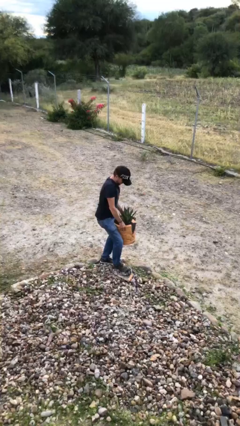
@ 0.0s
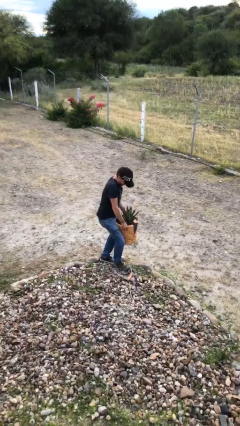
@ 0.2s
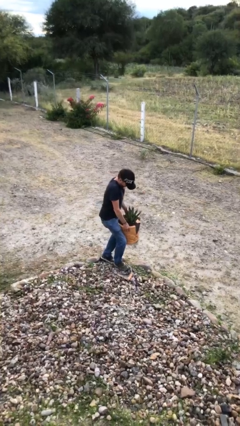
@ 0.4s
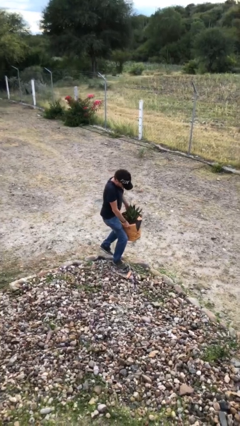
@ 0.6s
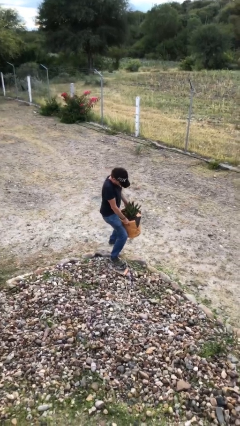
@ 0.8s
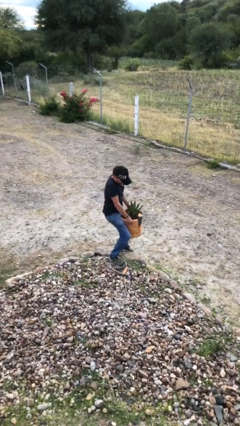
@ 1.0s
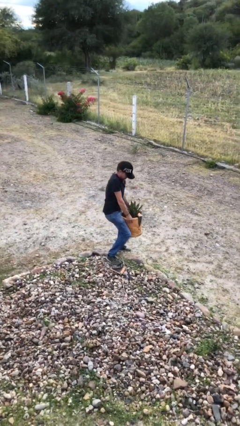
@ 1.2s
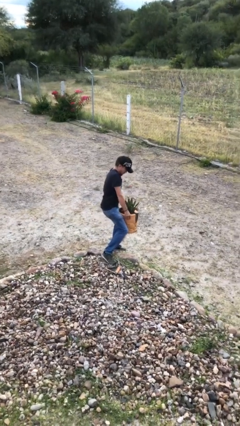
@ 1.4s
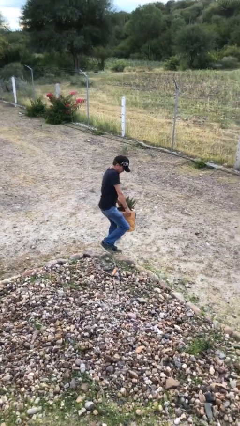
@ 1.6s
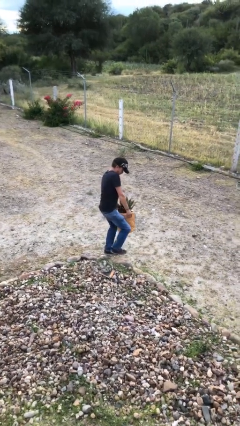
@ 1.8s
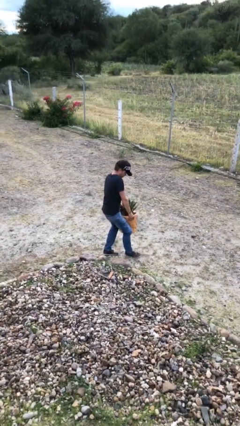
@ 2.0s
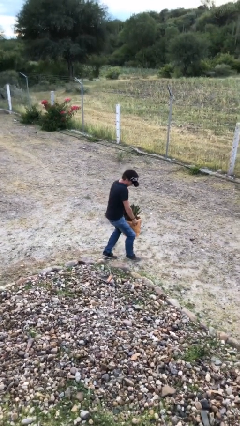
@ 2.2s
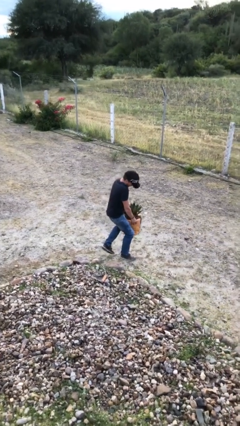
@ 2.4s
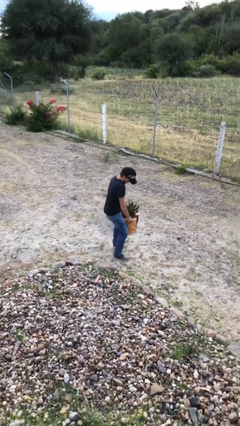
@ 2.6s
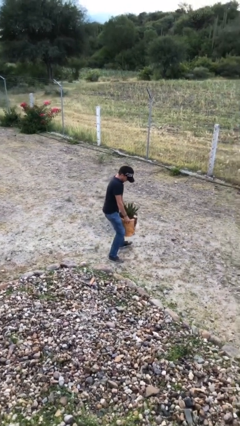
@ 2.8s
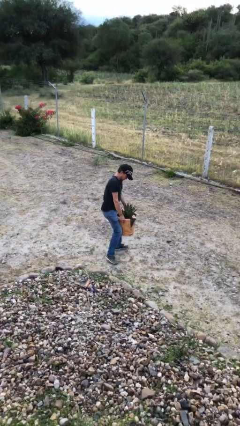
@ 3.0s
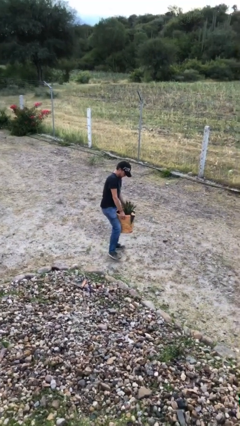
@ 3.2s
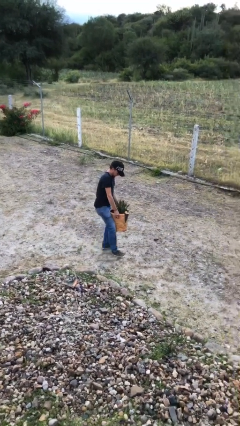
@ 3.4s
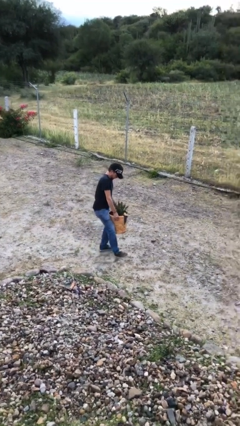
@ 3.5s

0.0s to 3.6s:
person carries heavy object

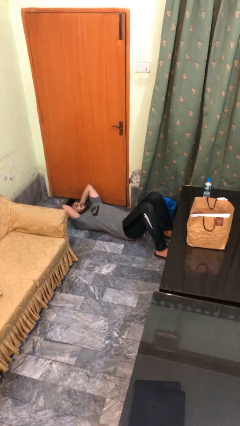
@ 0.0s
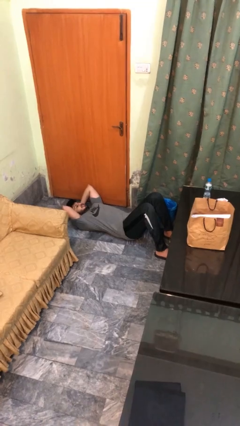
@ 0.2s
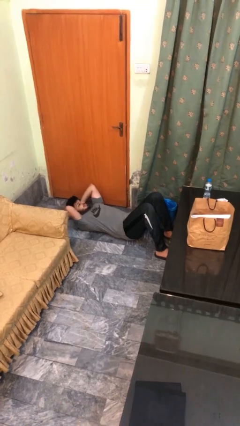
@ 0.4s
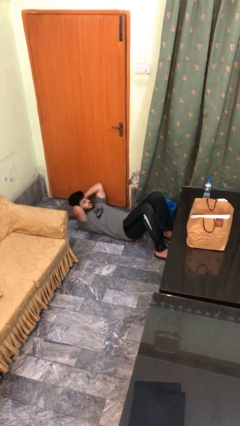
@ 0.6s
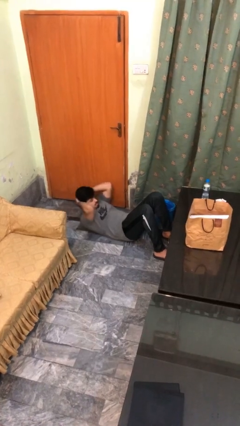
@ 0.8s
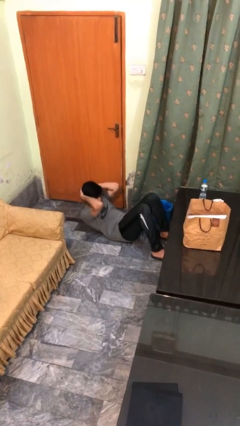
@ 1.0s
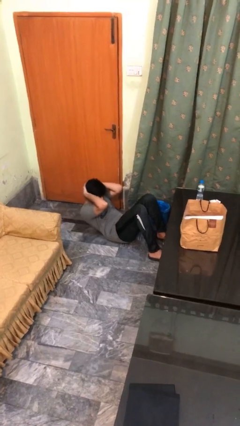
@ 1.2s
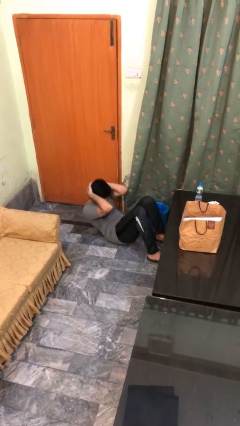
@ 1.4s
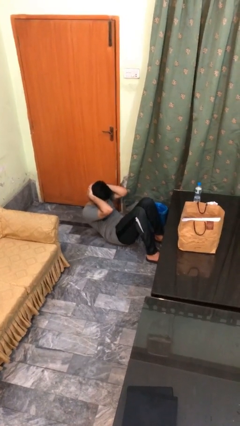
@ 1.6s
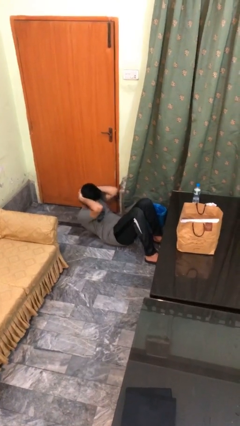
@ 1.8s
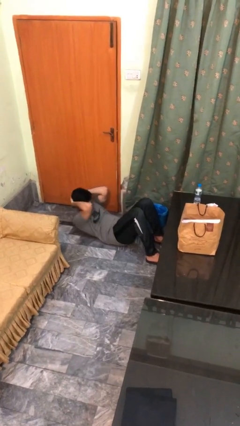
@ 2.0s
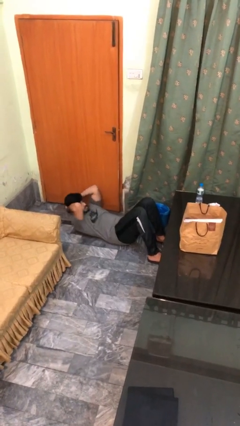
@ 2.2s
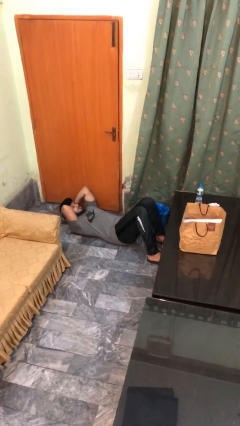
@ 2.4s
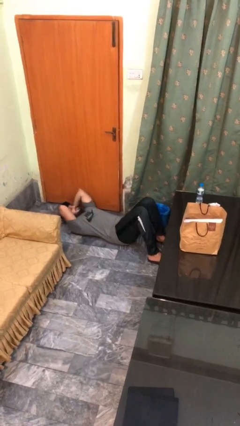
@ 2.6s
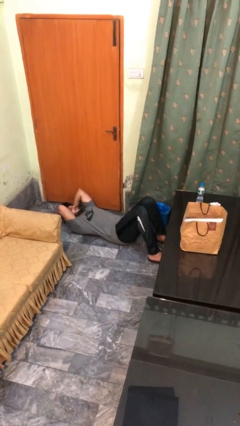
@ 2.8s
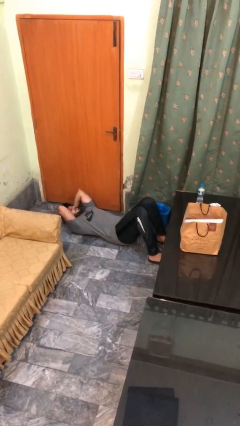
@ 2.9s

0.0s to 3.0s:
person exercises with situp

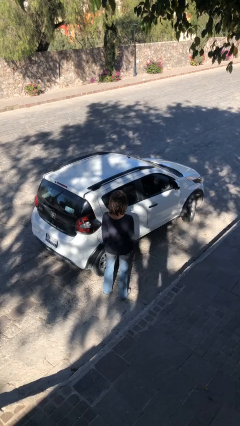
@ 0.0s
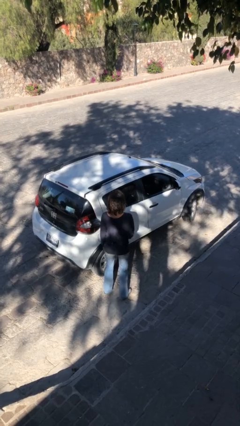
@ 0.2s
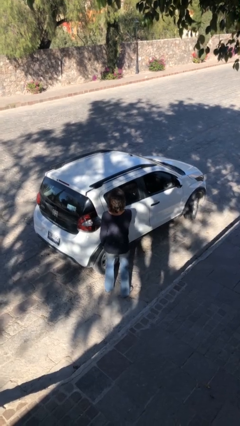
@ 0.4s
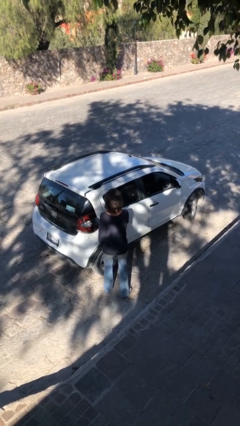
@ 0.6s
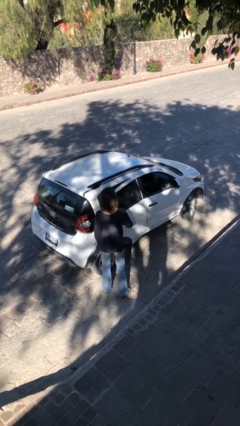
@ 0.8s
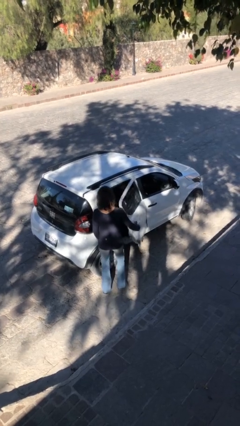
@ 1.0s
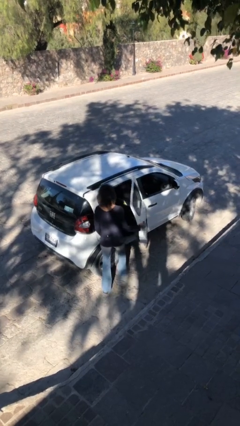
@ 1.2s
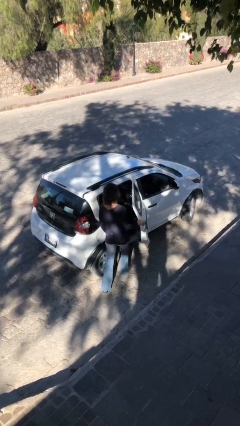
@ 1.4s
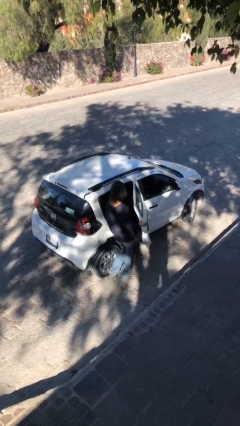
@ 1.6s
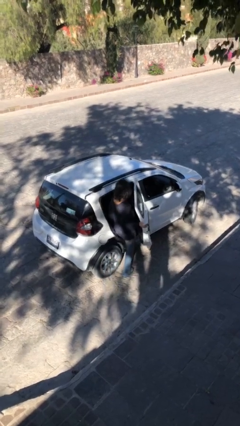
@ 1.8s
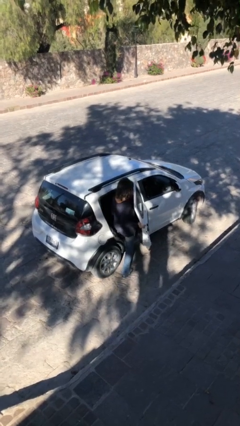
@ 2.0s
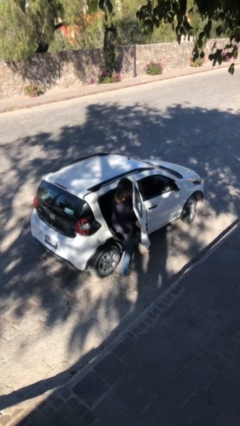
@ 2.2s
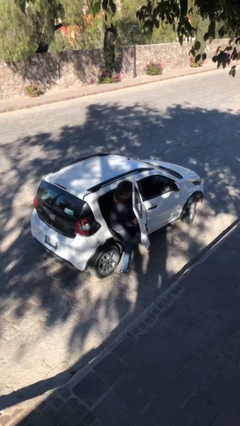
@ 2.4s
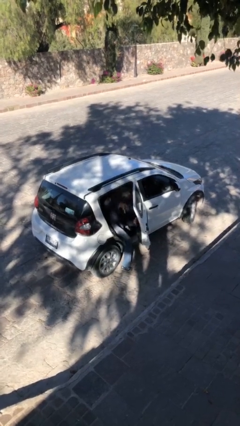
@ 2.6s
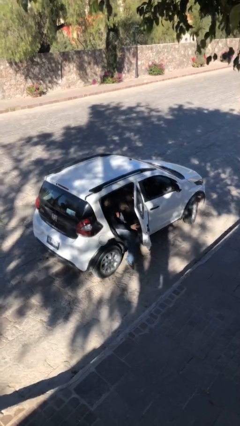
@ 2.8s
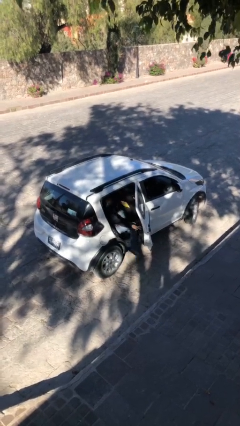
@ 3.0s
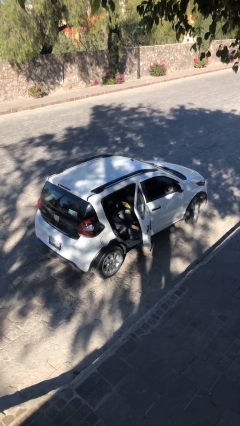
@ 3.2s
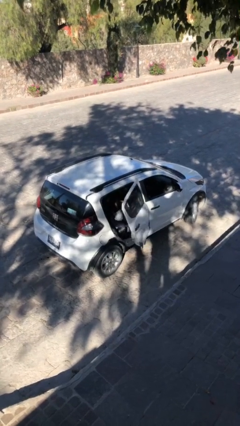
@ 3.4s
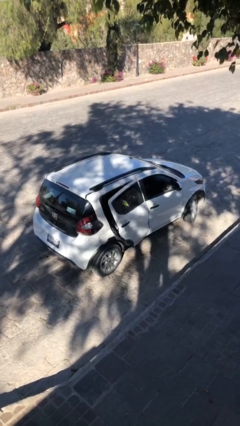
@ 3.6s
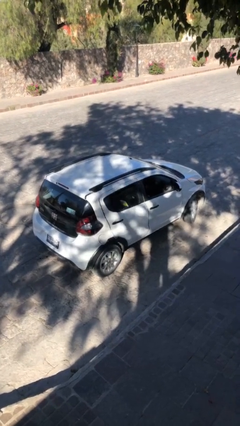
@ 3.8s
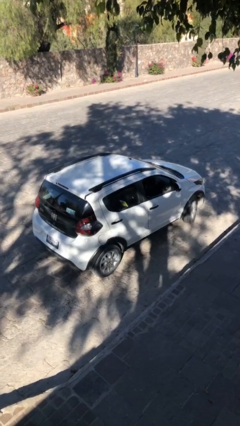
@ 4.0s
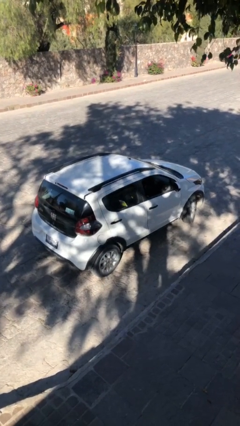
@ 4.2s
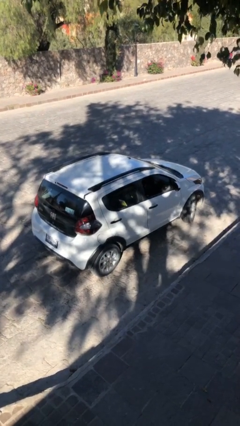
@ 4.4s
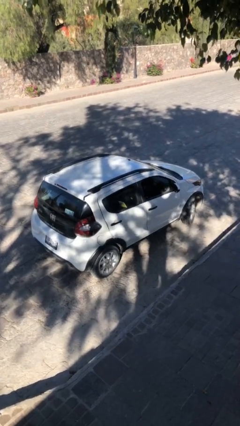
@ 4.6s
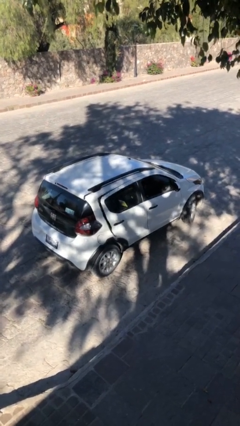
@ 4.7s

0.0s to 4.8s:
car picks up person

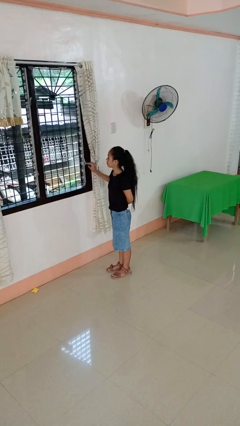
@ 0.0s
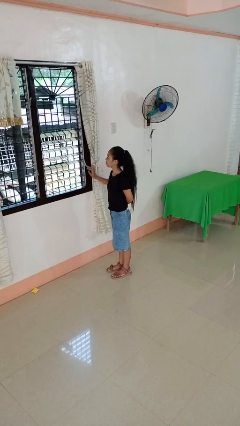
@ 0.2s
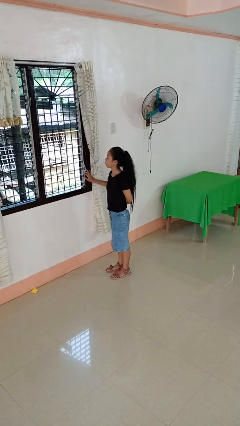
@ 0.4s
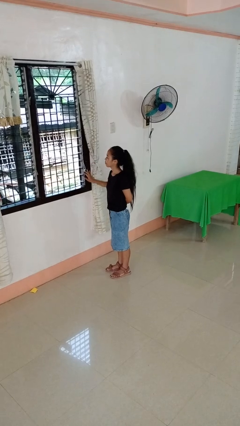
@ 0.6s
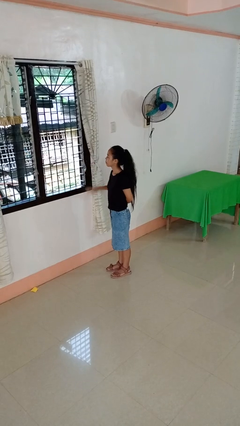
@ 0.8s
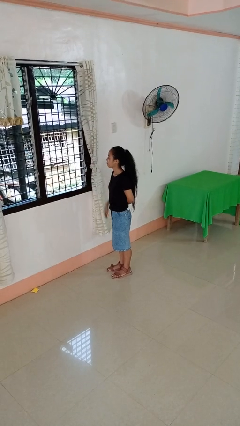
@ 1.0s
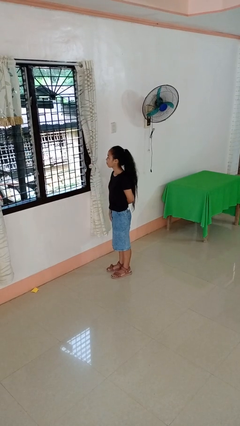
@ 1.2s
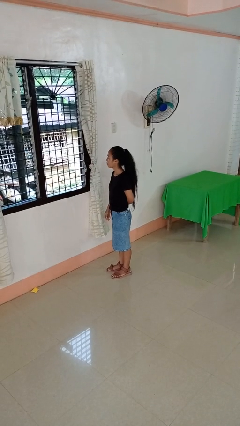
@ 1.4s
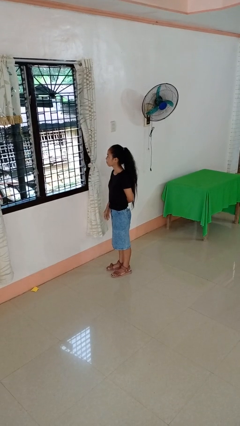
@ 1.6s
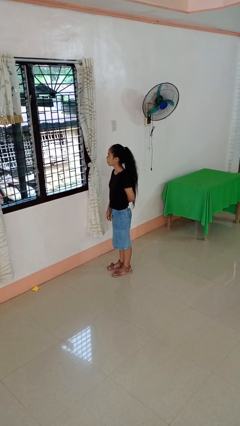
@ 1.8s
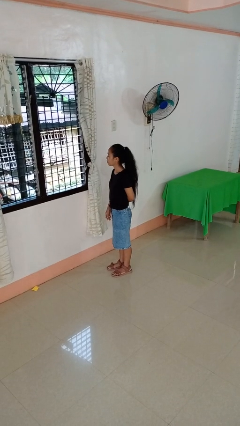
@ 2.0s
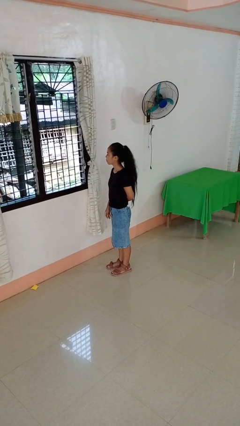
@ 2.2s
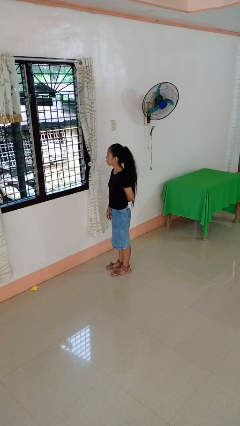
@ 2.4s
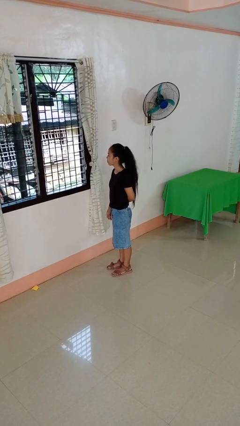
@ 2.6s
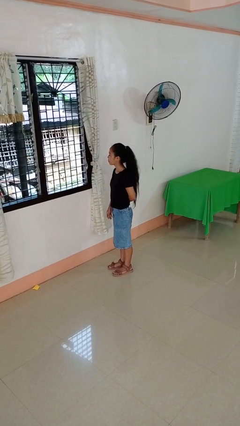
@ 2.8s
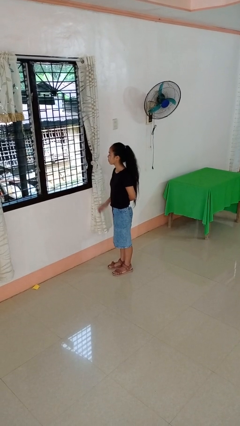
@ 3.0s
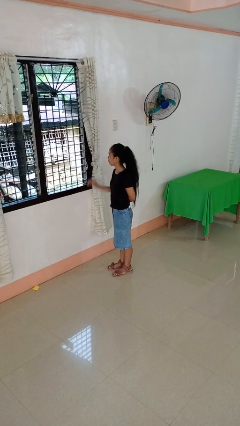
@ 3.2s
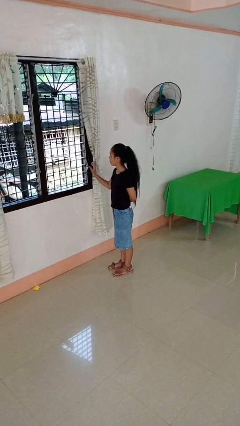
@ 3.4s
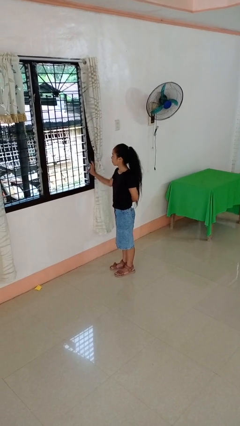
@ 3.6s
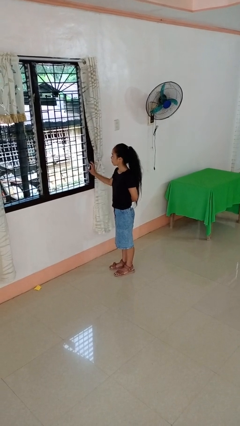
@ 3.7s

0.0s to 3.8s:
person opens home window

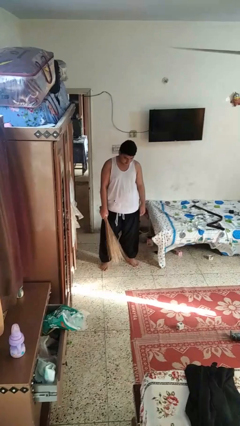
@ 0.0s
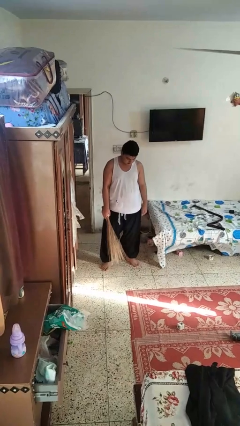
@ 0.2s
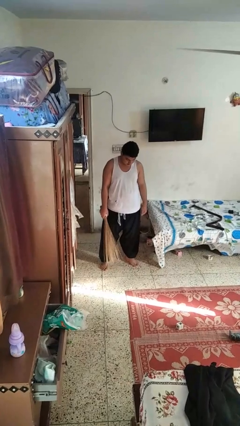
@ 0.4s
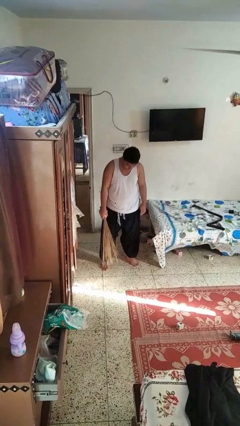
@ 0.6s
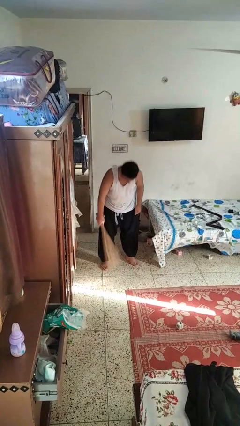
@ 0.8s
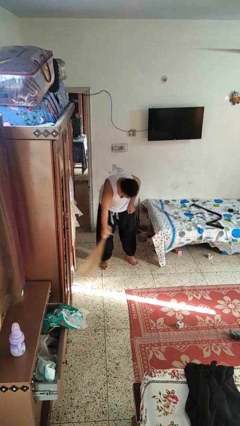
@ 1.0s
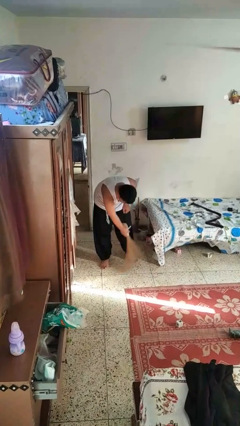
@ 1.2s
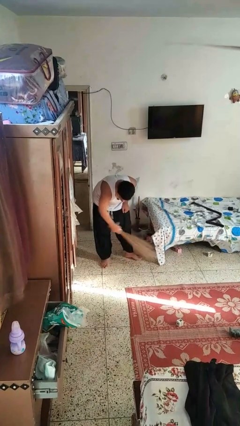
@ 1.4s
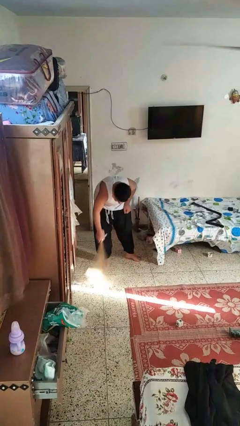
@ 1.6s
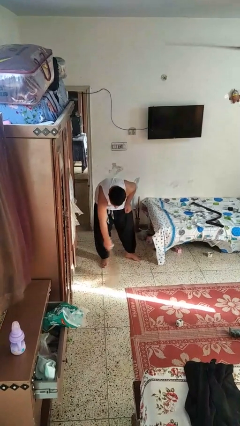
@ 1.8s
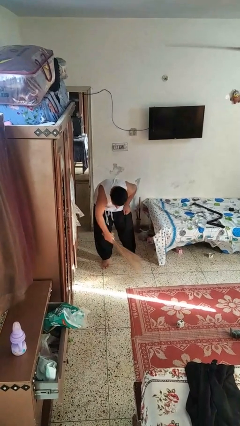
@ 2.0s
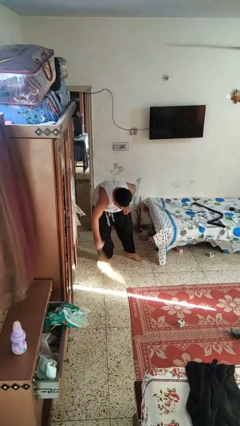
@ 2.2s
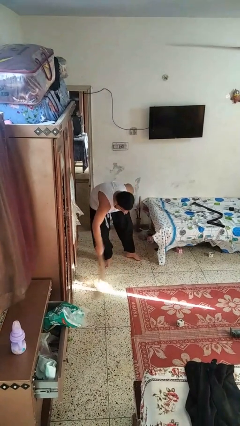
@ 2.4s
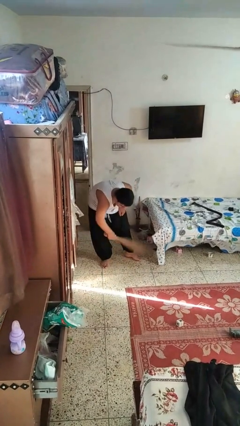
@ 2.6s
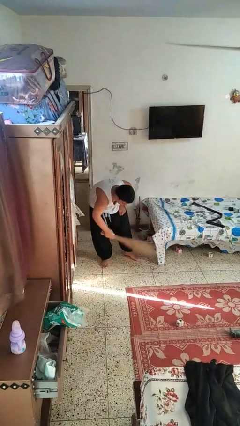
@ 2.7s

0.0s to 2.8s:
person sweeps floor
